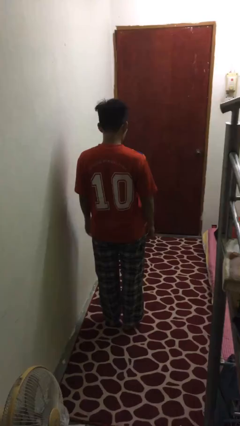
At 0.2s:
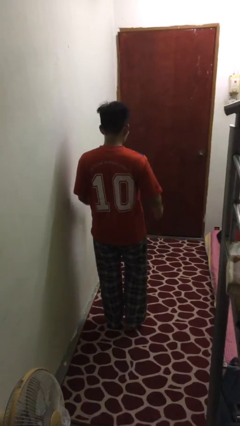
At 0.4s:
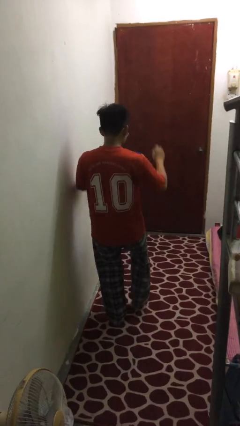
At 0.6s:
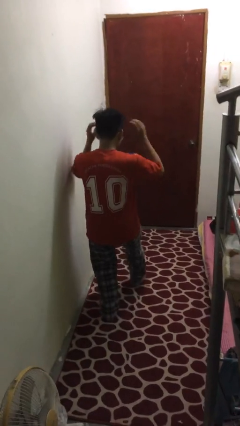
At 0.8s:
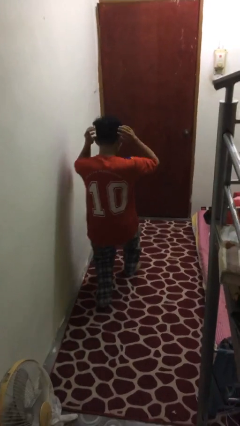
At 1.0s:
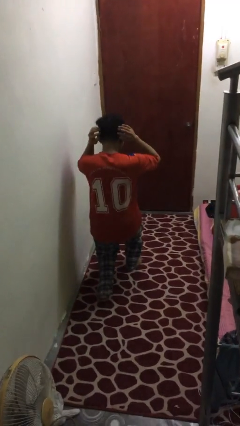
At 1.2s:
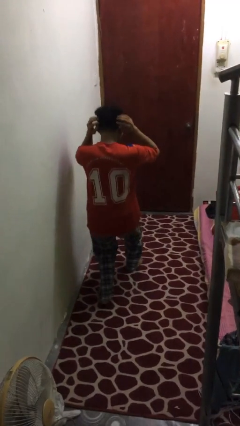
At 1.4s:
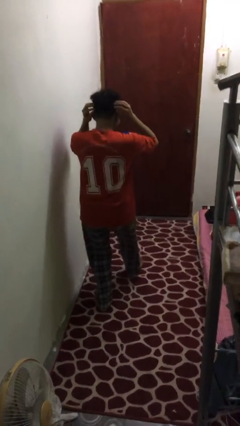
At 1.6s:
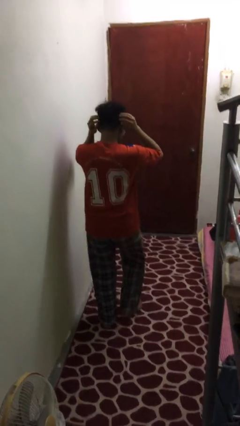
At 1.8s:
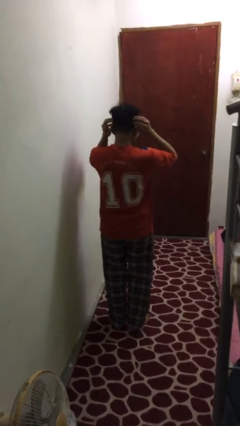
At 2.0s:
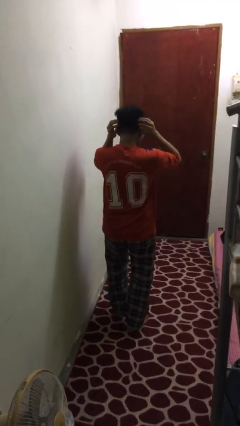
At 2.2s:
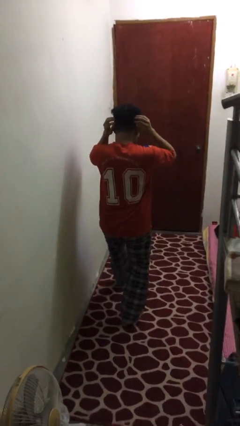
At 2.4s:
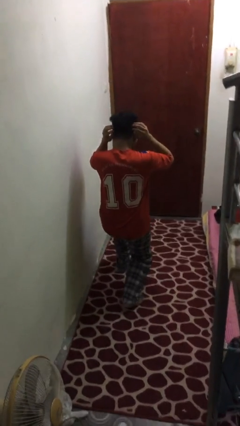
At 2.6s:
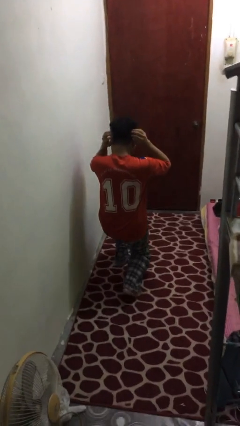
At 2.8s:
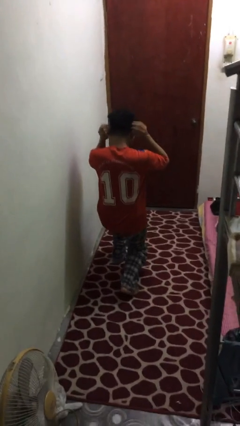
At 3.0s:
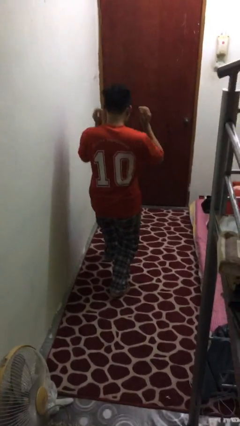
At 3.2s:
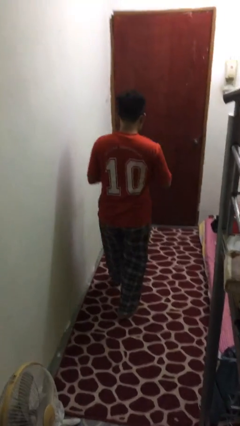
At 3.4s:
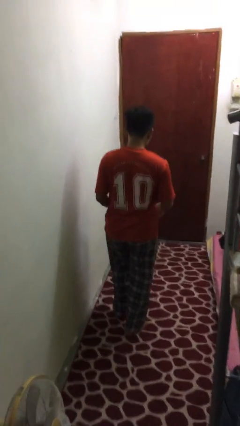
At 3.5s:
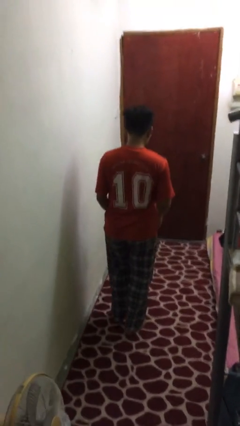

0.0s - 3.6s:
person exercises with lunges

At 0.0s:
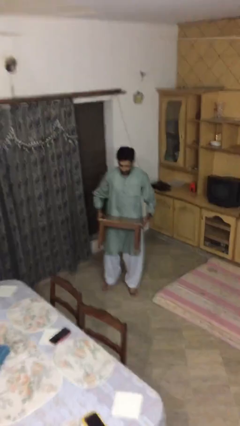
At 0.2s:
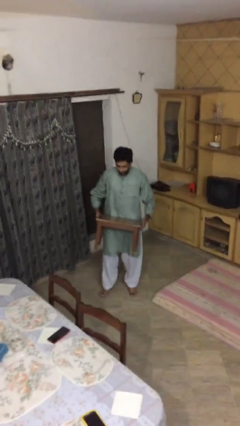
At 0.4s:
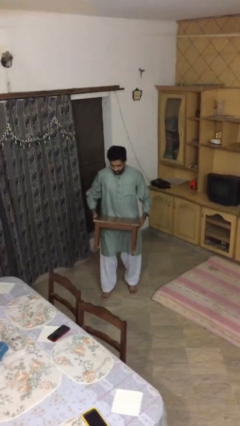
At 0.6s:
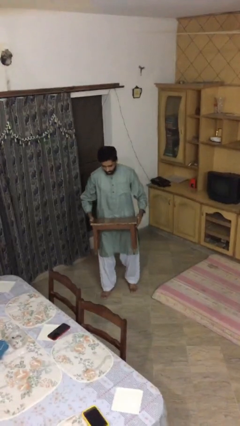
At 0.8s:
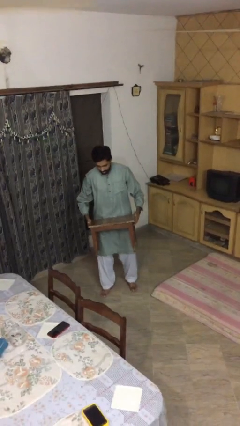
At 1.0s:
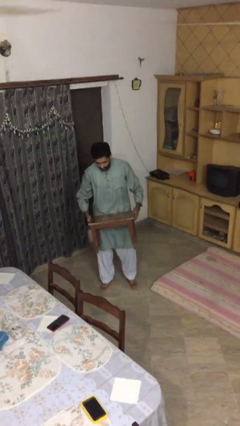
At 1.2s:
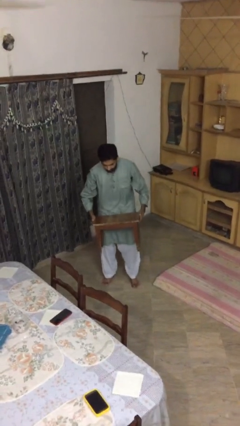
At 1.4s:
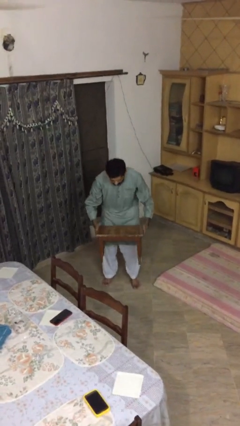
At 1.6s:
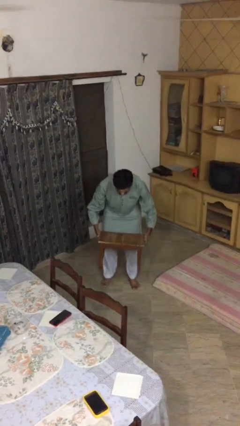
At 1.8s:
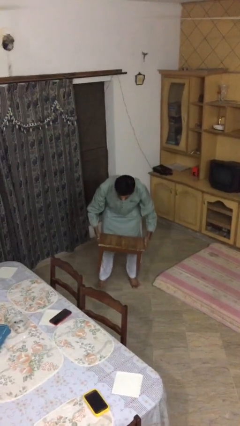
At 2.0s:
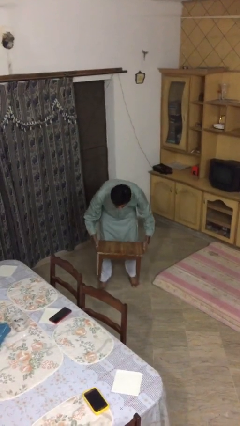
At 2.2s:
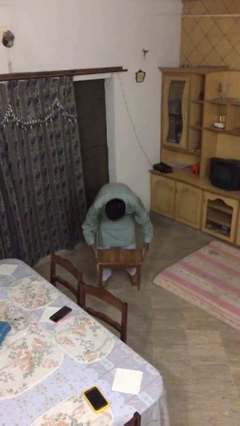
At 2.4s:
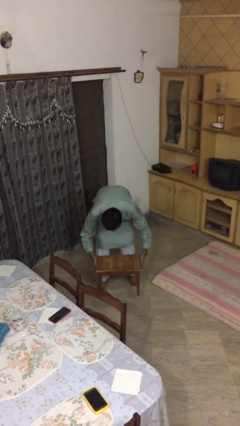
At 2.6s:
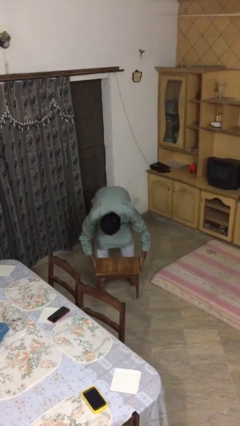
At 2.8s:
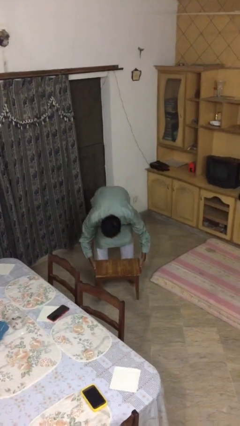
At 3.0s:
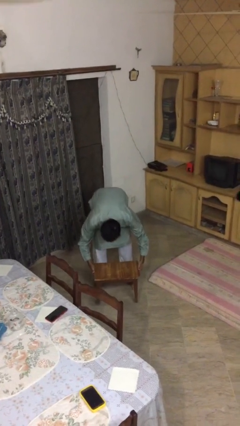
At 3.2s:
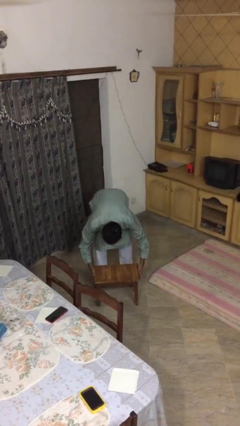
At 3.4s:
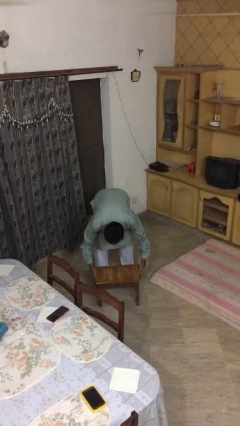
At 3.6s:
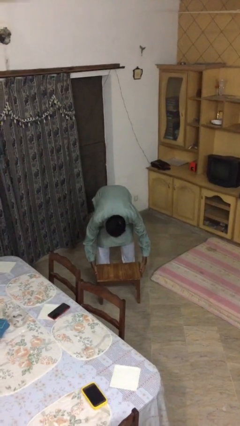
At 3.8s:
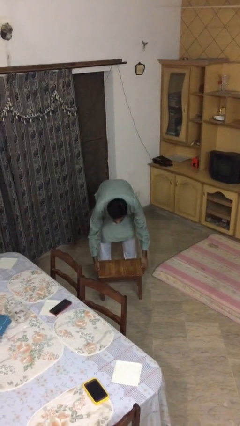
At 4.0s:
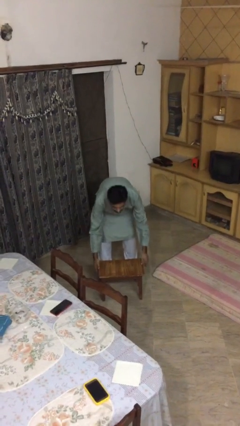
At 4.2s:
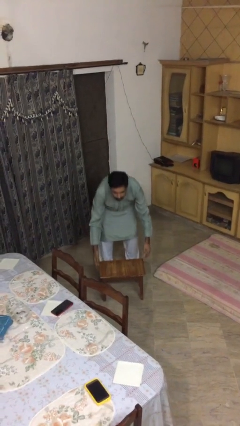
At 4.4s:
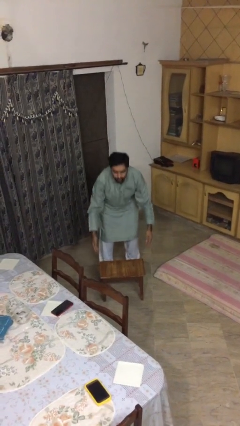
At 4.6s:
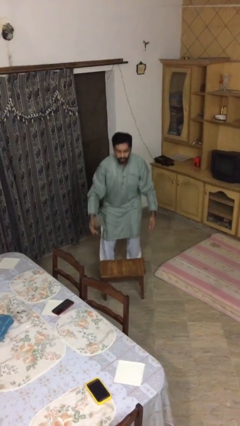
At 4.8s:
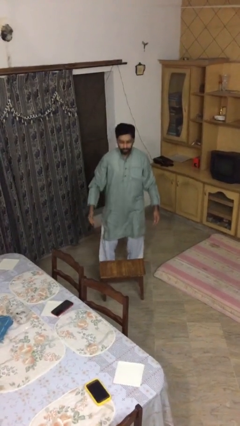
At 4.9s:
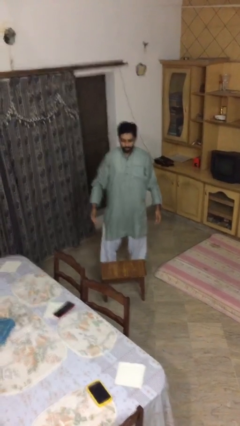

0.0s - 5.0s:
person puts down object on floor

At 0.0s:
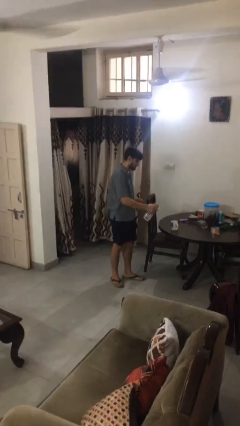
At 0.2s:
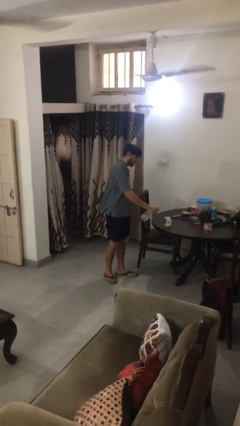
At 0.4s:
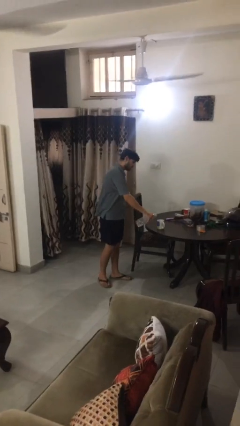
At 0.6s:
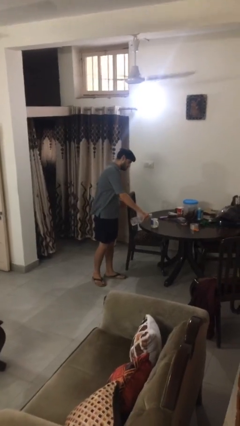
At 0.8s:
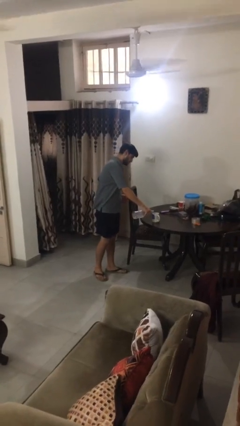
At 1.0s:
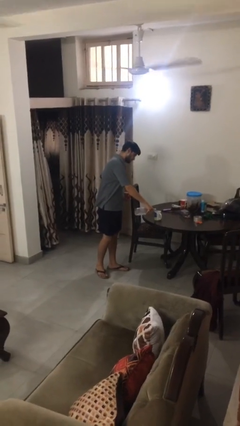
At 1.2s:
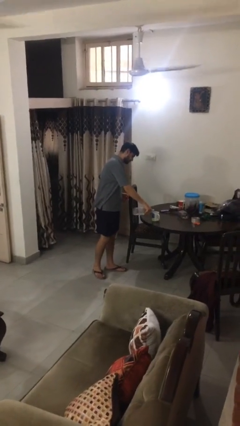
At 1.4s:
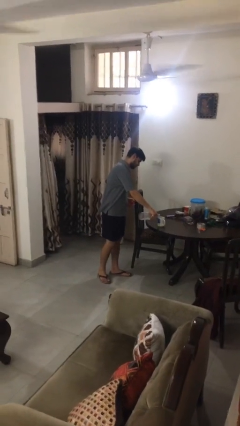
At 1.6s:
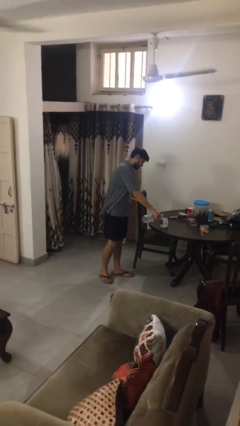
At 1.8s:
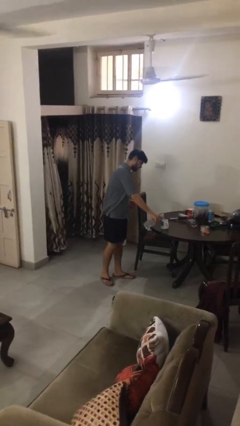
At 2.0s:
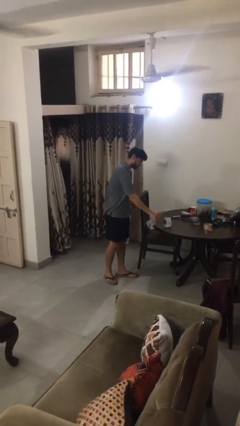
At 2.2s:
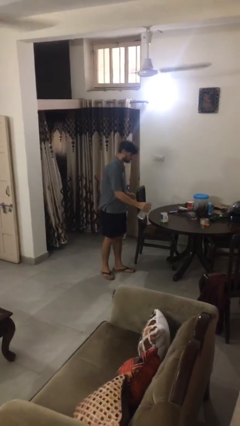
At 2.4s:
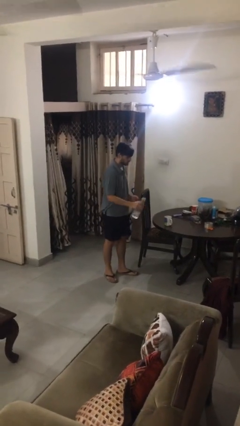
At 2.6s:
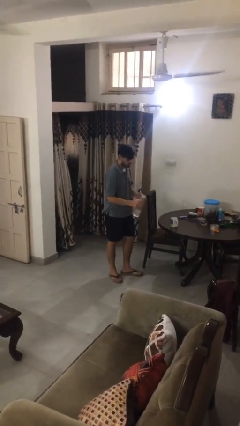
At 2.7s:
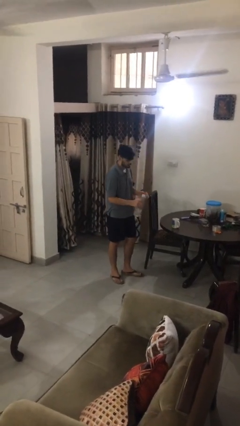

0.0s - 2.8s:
person pours liquid into cup

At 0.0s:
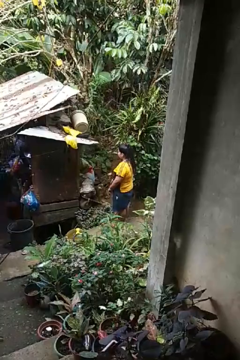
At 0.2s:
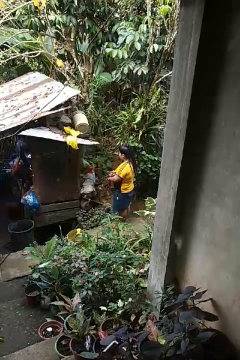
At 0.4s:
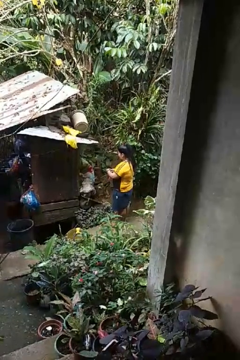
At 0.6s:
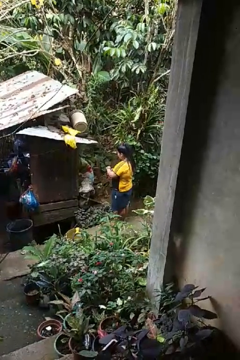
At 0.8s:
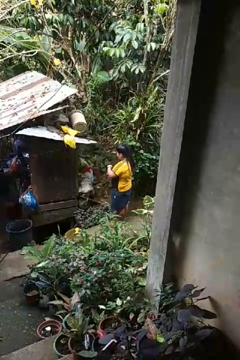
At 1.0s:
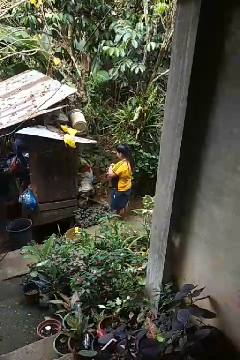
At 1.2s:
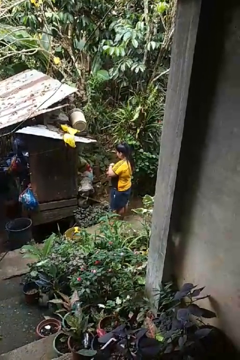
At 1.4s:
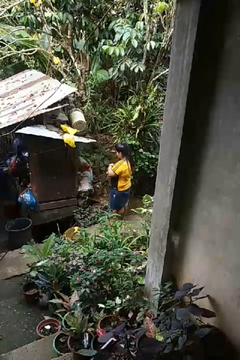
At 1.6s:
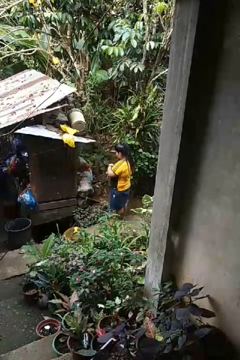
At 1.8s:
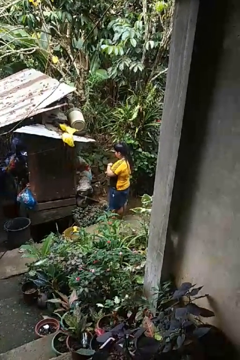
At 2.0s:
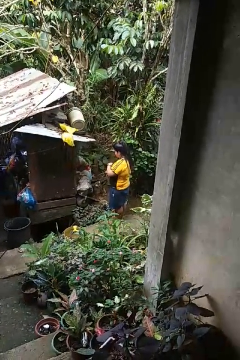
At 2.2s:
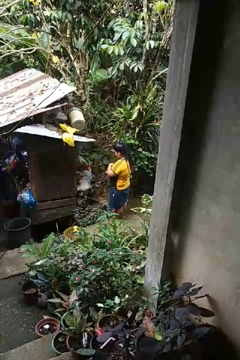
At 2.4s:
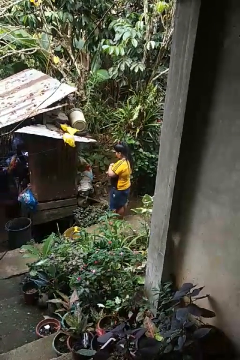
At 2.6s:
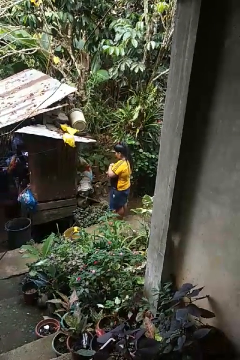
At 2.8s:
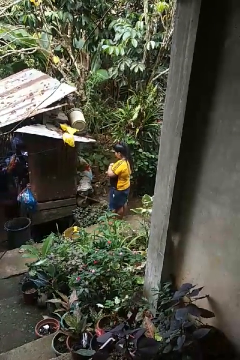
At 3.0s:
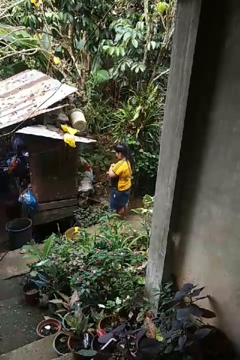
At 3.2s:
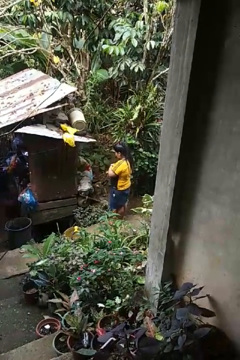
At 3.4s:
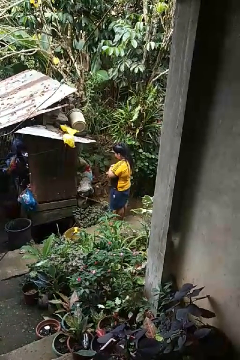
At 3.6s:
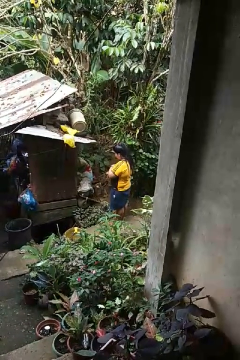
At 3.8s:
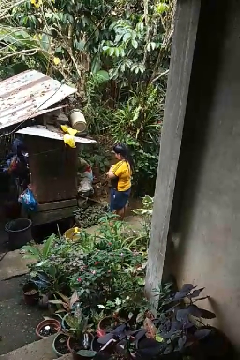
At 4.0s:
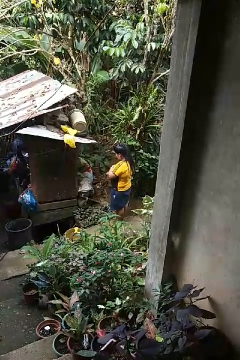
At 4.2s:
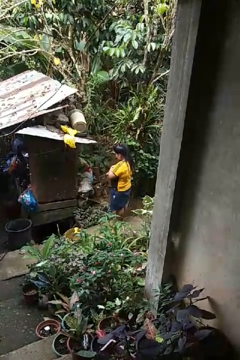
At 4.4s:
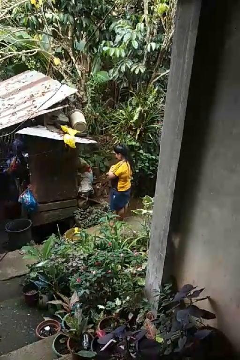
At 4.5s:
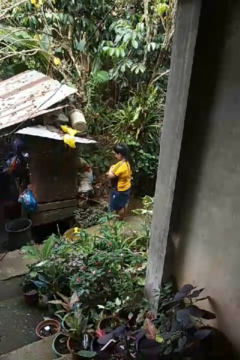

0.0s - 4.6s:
person puts on wristwatch

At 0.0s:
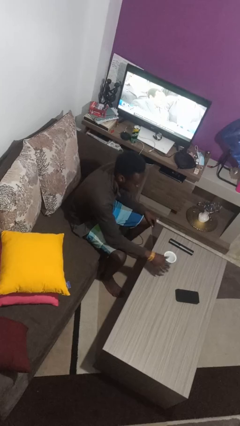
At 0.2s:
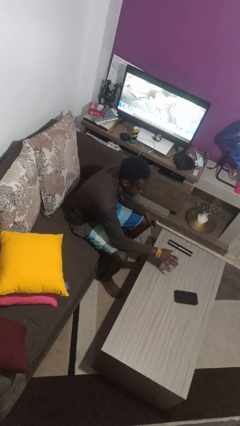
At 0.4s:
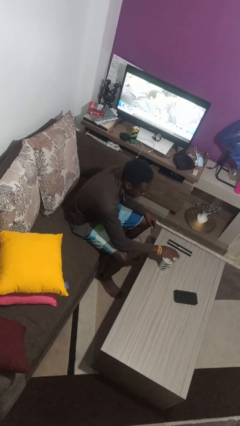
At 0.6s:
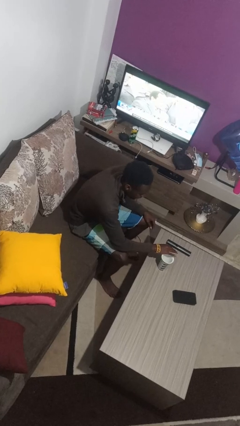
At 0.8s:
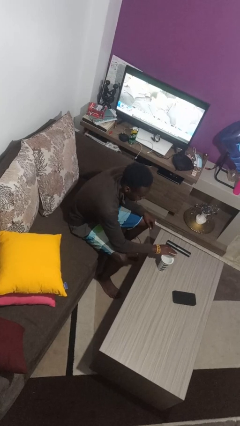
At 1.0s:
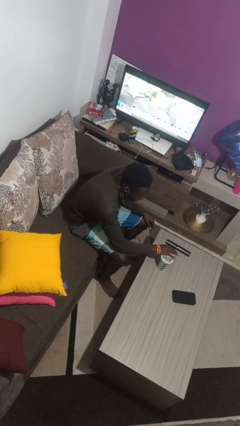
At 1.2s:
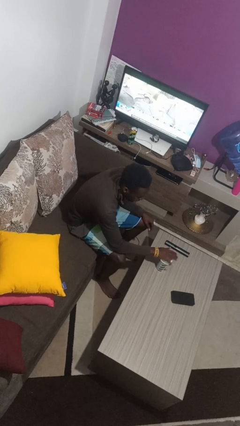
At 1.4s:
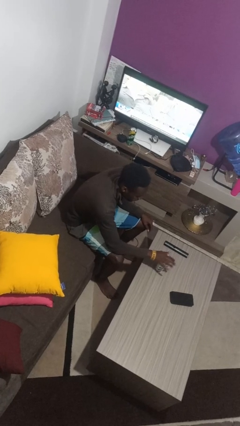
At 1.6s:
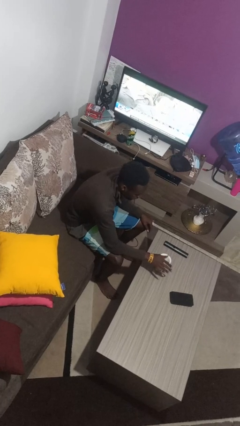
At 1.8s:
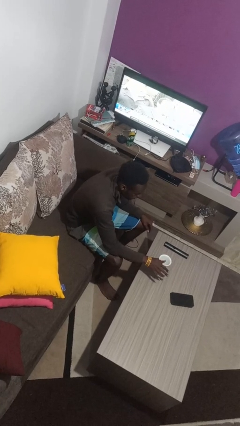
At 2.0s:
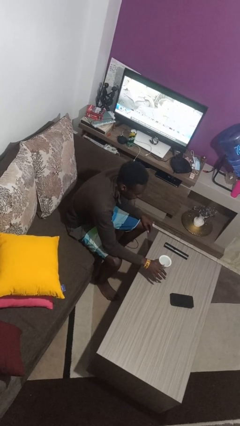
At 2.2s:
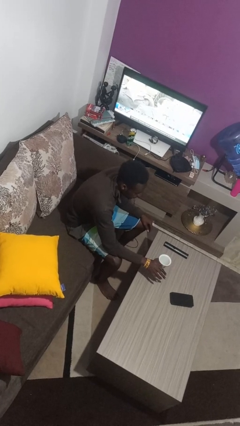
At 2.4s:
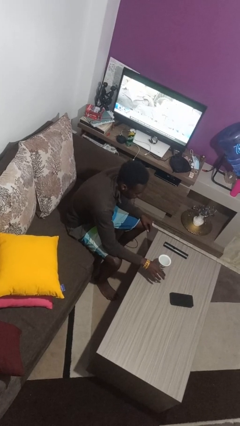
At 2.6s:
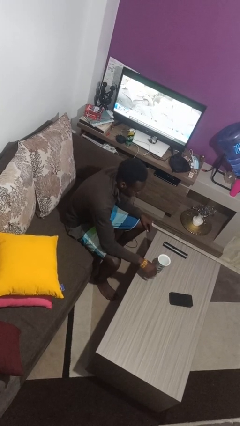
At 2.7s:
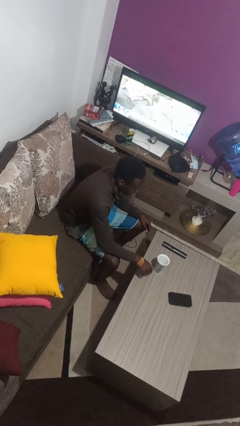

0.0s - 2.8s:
person waves hand over object
